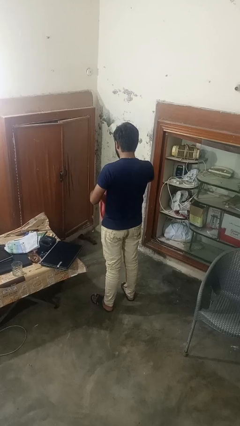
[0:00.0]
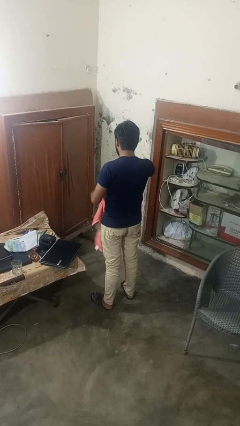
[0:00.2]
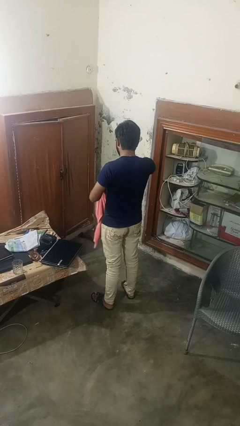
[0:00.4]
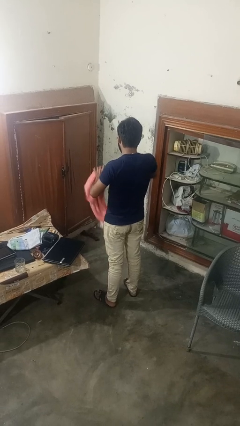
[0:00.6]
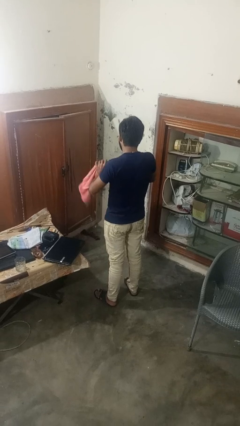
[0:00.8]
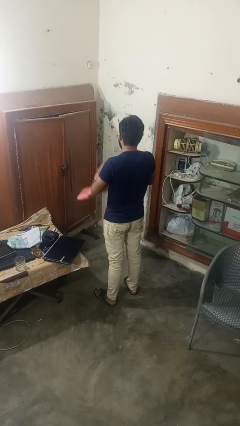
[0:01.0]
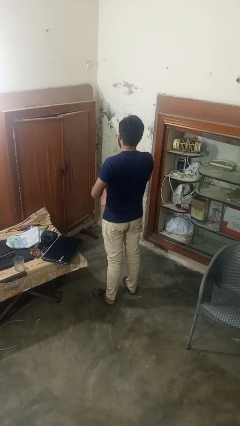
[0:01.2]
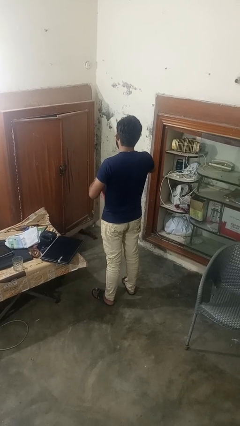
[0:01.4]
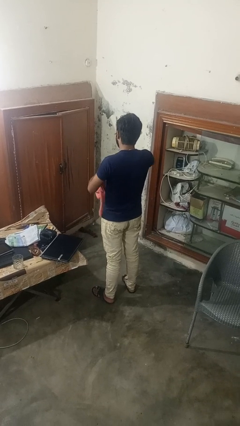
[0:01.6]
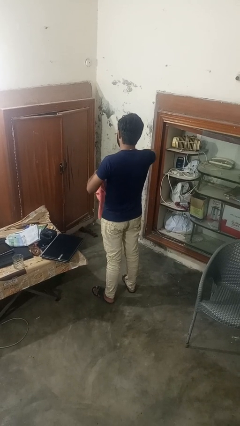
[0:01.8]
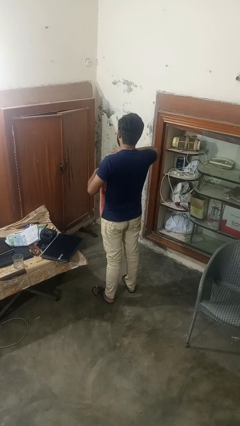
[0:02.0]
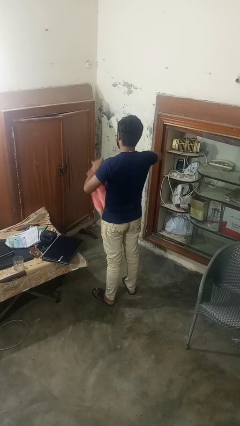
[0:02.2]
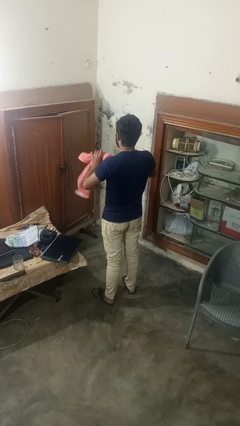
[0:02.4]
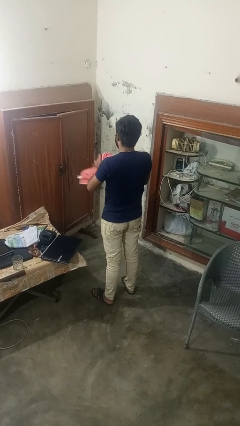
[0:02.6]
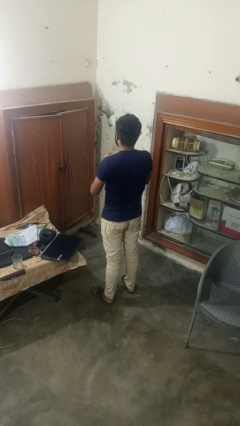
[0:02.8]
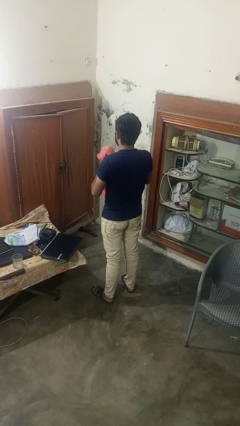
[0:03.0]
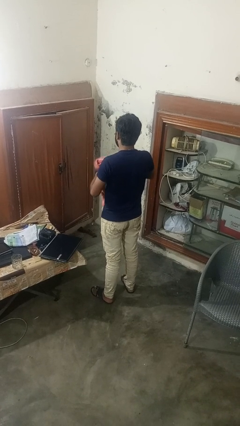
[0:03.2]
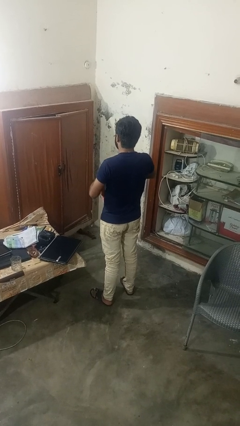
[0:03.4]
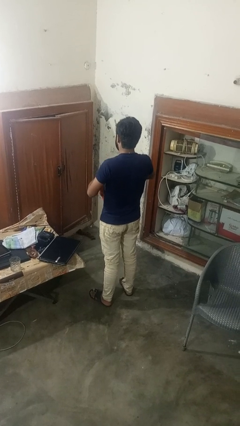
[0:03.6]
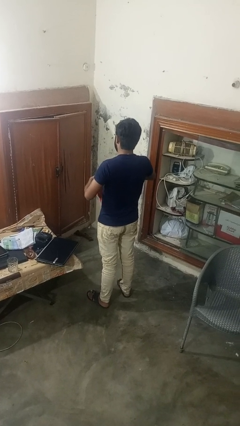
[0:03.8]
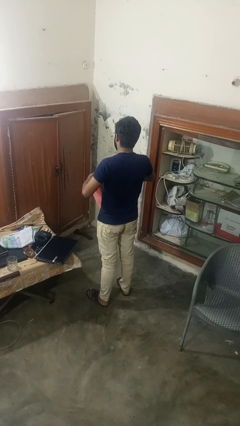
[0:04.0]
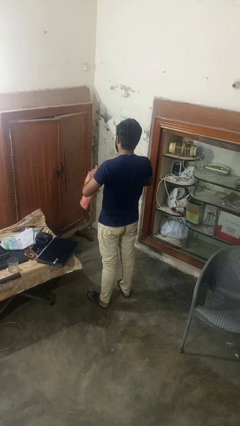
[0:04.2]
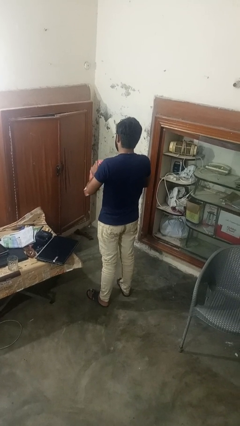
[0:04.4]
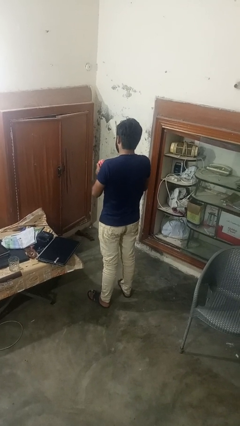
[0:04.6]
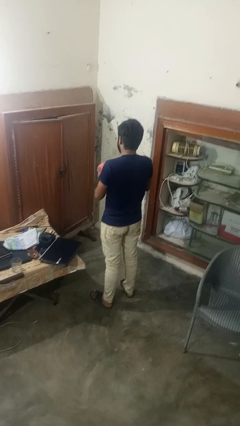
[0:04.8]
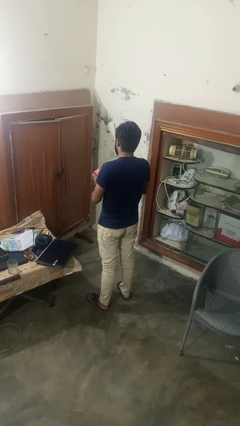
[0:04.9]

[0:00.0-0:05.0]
person squeezes object

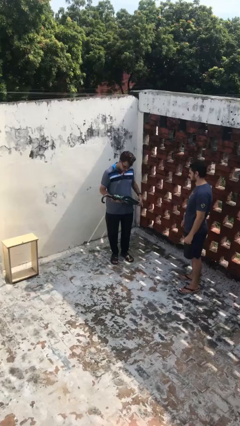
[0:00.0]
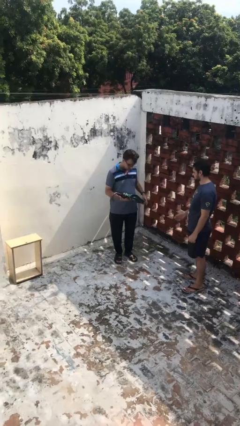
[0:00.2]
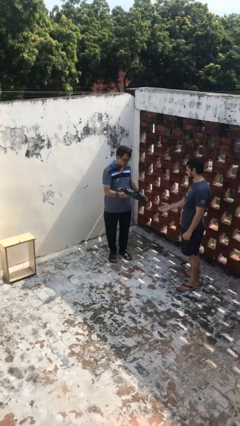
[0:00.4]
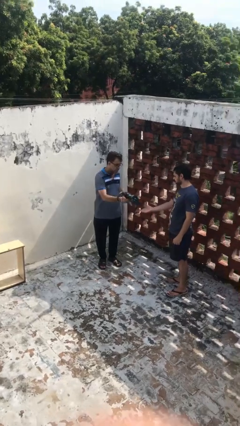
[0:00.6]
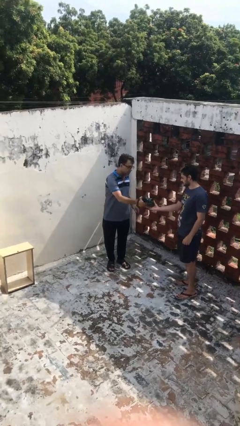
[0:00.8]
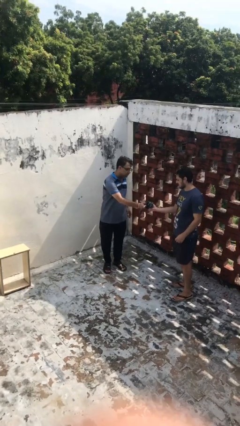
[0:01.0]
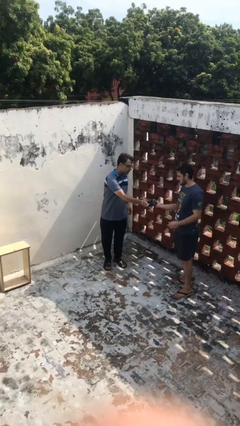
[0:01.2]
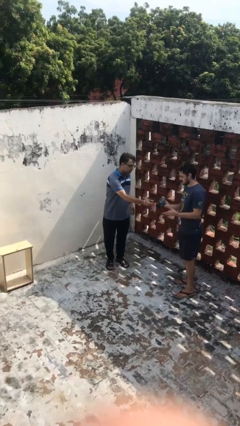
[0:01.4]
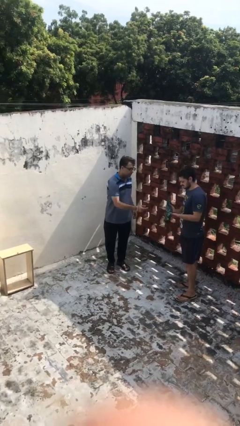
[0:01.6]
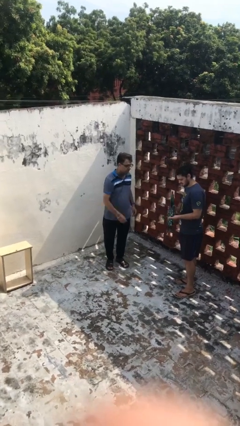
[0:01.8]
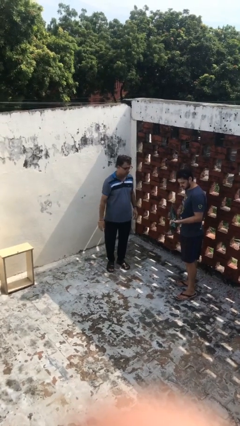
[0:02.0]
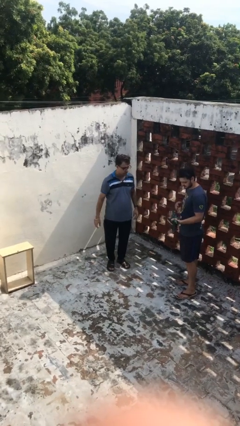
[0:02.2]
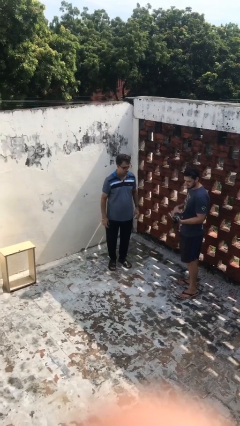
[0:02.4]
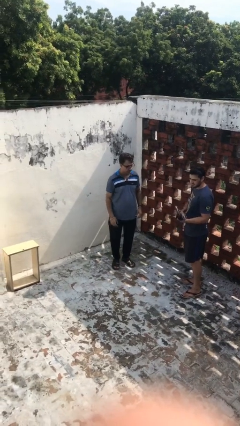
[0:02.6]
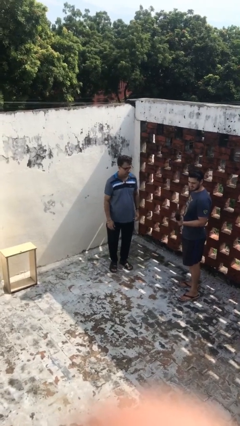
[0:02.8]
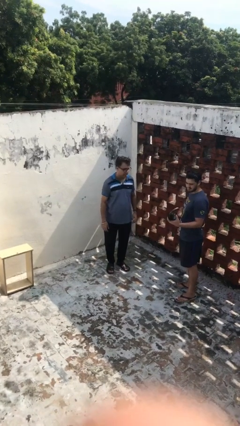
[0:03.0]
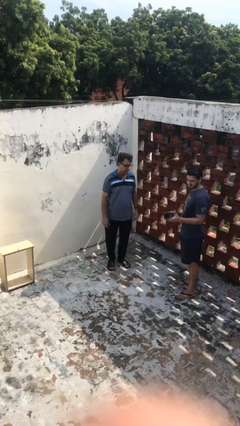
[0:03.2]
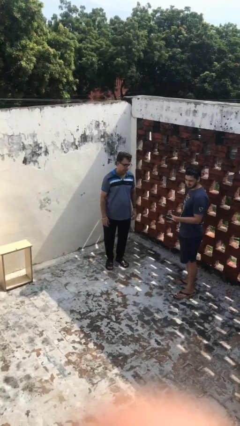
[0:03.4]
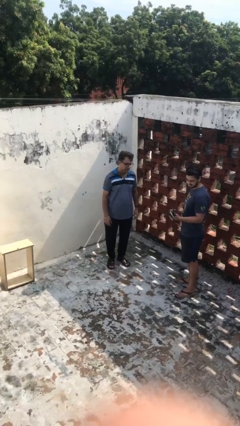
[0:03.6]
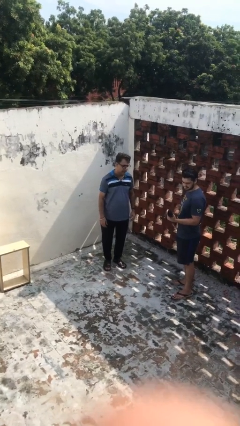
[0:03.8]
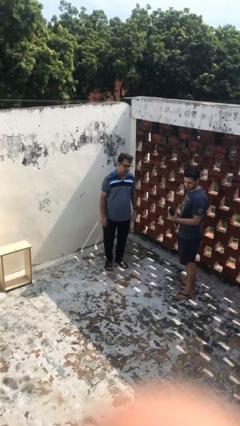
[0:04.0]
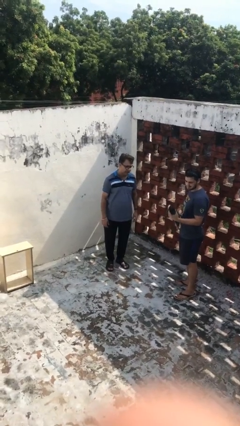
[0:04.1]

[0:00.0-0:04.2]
person transfers object to person

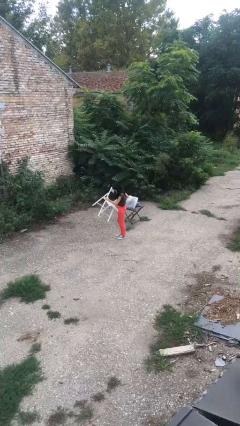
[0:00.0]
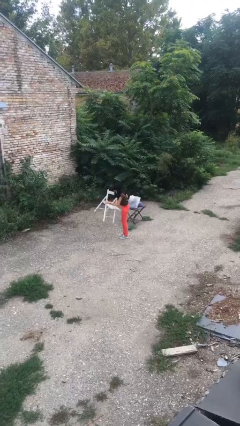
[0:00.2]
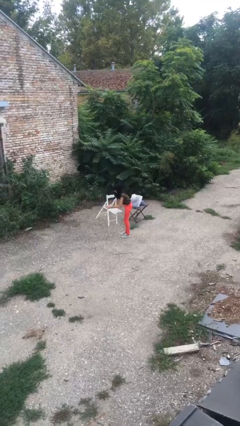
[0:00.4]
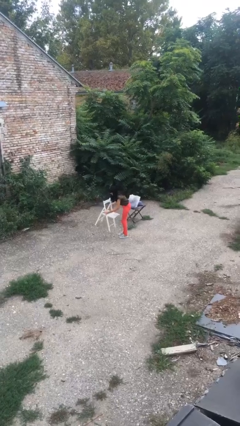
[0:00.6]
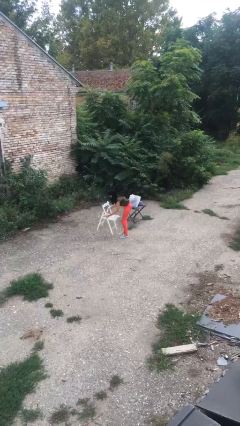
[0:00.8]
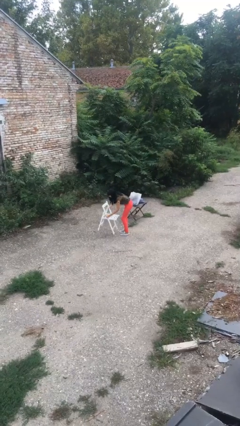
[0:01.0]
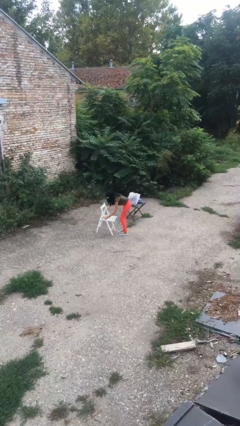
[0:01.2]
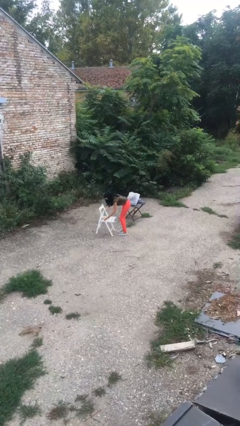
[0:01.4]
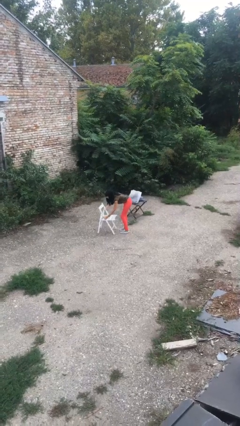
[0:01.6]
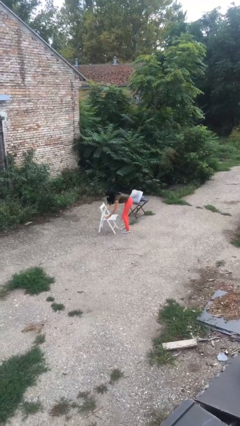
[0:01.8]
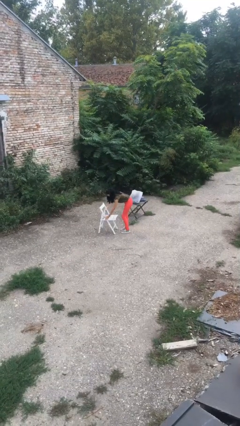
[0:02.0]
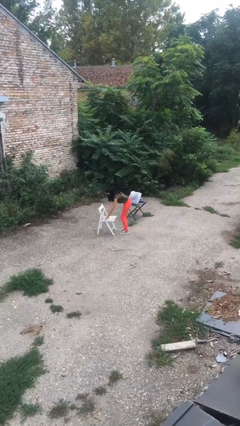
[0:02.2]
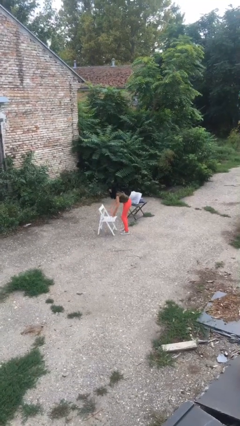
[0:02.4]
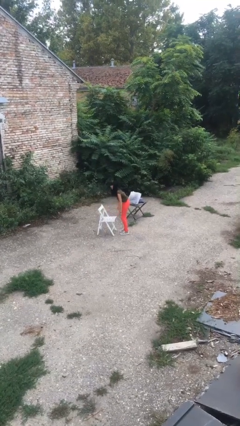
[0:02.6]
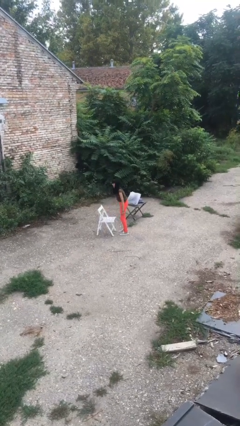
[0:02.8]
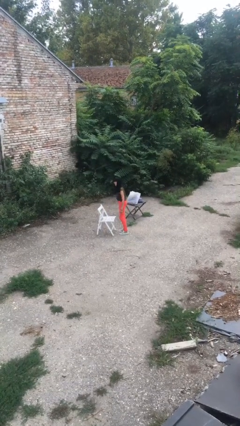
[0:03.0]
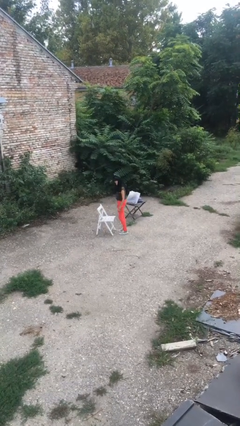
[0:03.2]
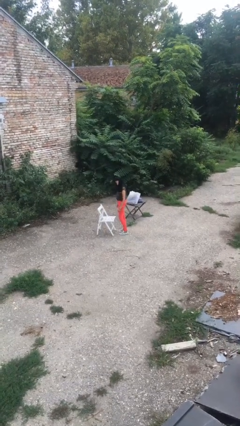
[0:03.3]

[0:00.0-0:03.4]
person puts down object on floor

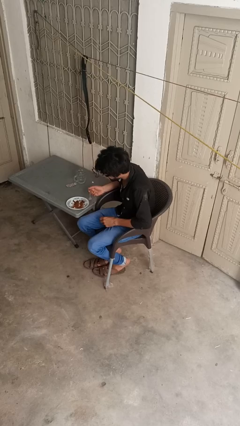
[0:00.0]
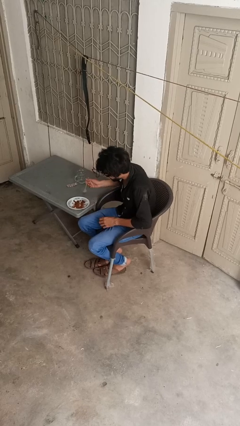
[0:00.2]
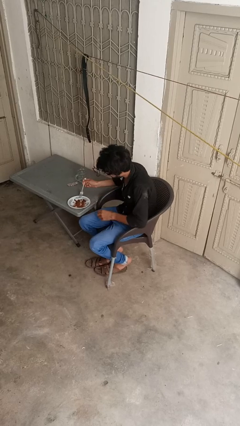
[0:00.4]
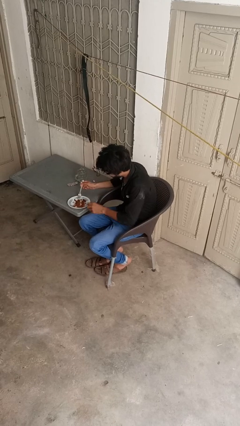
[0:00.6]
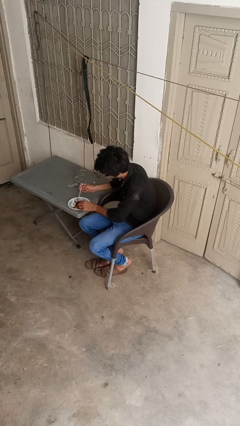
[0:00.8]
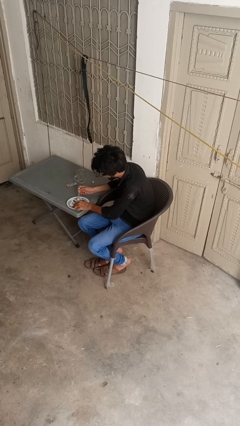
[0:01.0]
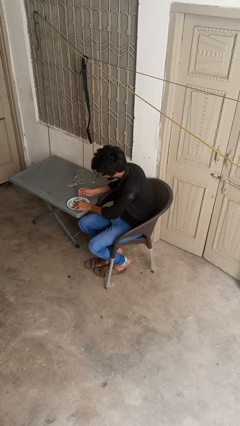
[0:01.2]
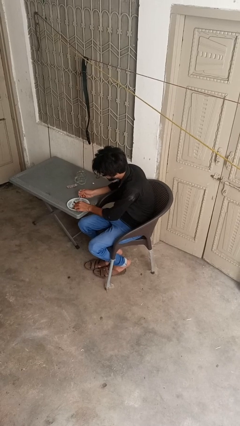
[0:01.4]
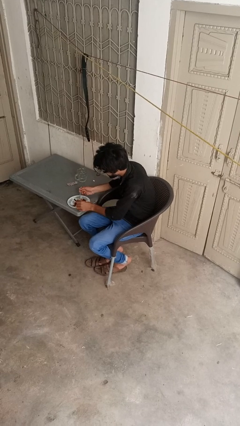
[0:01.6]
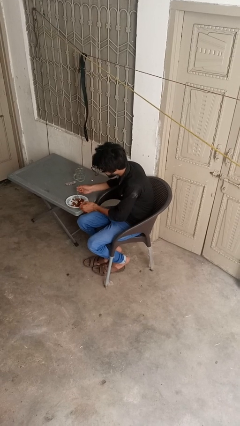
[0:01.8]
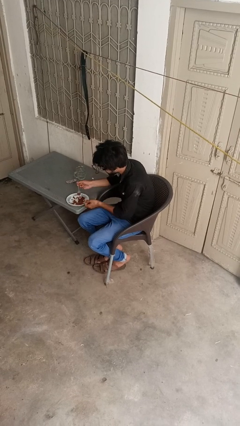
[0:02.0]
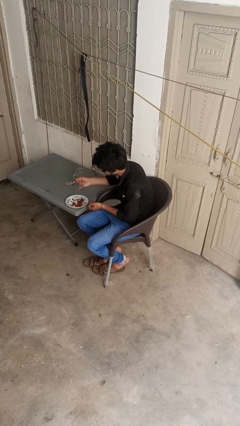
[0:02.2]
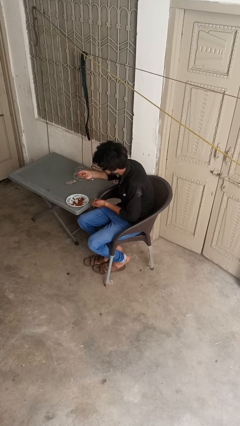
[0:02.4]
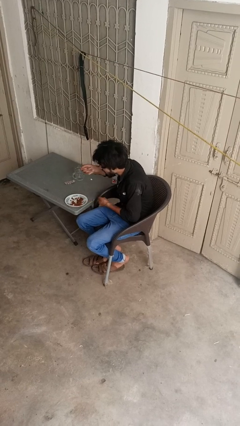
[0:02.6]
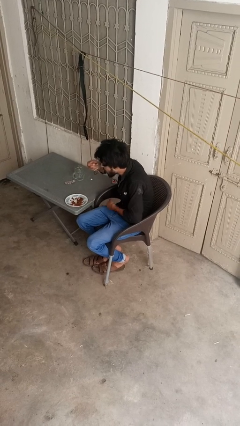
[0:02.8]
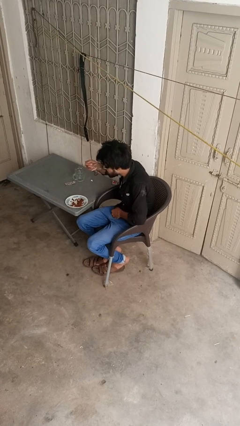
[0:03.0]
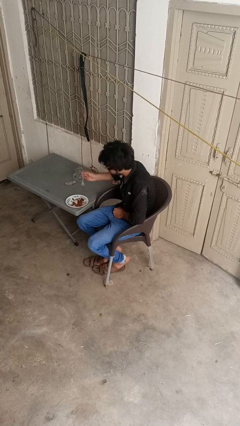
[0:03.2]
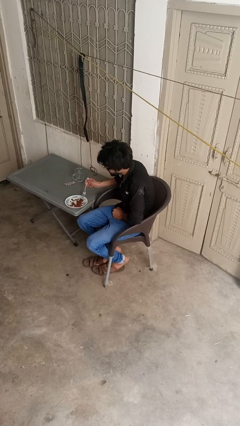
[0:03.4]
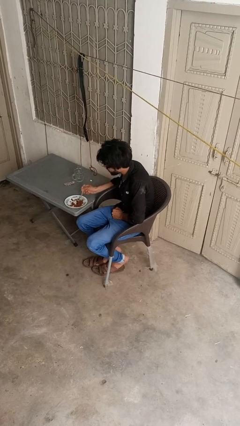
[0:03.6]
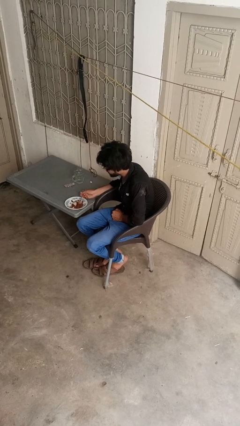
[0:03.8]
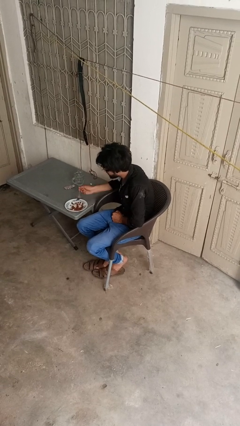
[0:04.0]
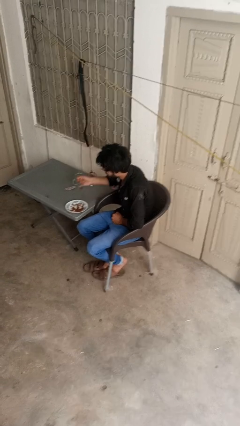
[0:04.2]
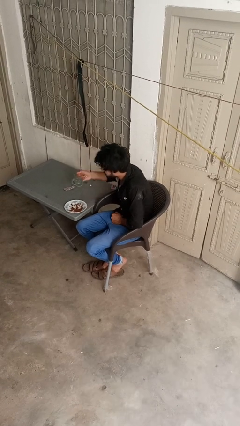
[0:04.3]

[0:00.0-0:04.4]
person eats with utensil
